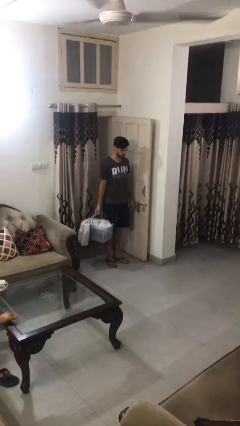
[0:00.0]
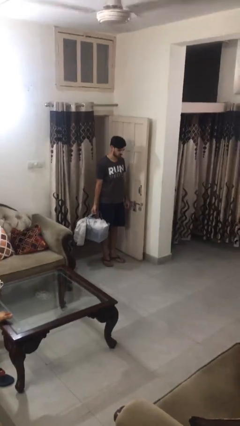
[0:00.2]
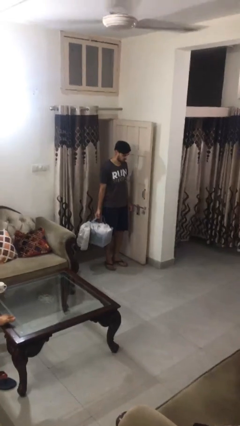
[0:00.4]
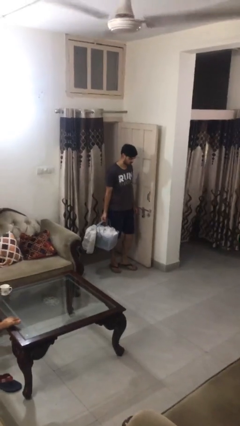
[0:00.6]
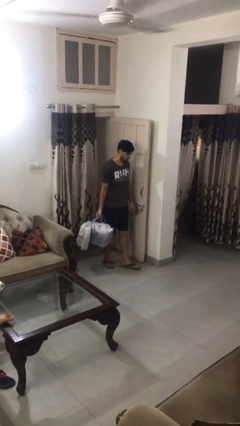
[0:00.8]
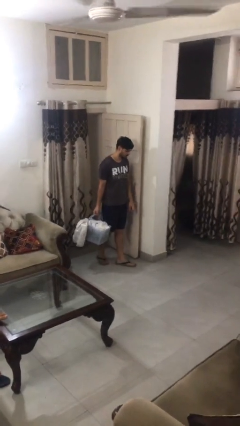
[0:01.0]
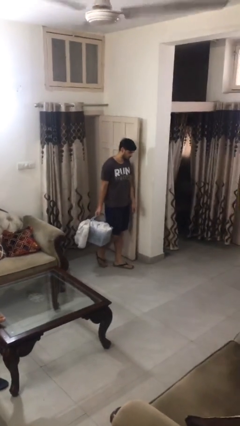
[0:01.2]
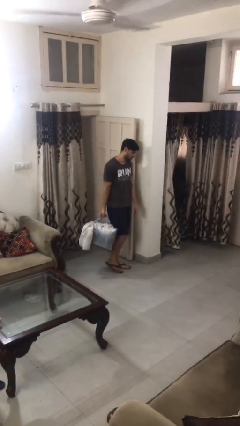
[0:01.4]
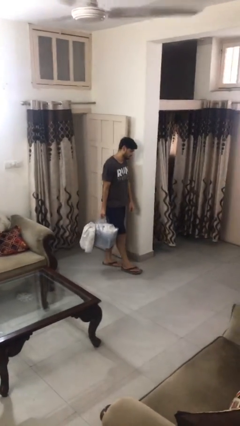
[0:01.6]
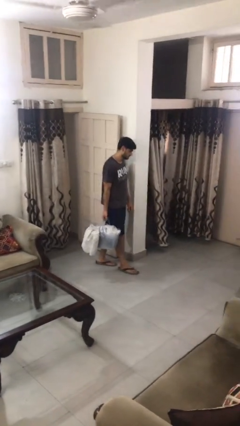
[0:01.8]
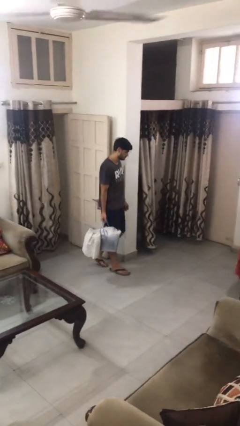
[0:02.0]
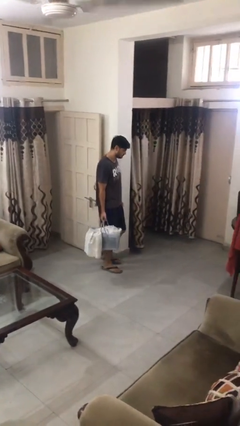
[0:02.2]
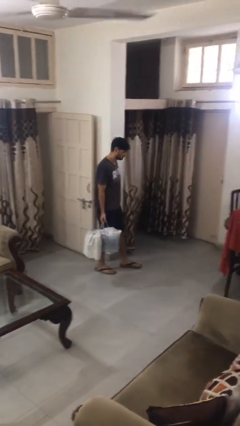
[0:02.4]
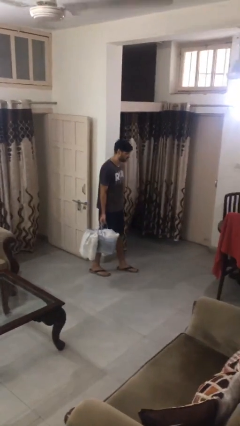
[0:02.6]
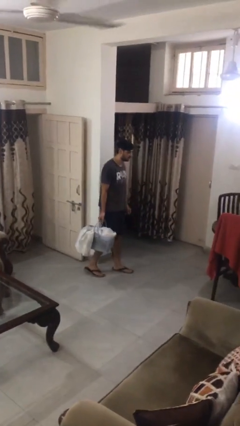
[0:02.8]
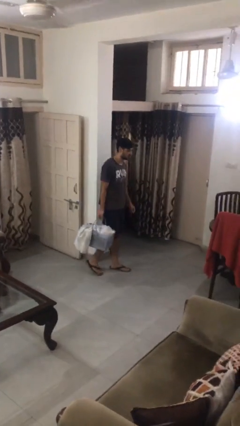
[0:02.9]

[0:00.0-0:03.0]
person carries laundry basket

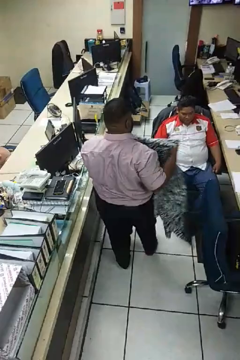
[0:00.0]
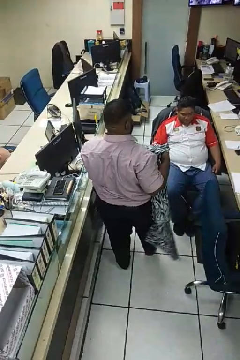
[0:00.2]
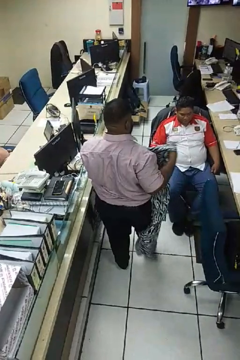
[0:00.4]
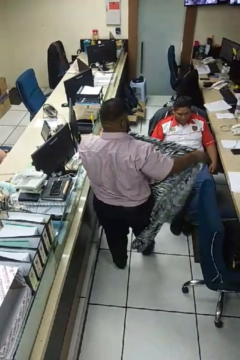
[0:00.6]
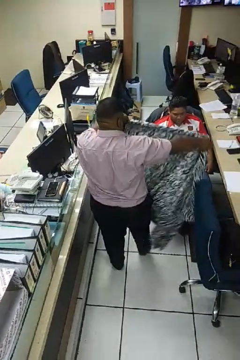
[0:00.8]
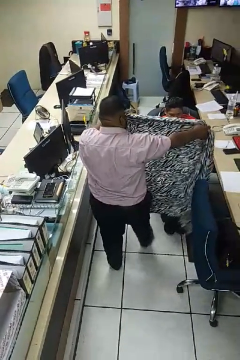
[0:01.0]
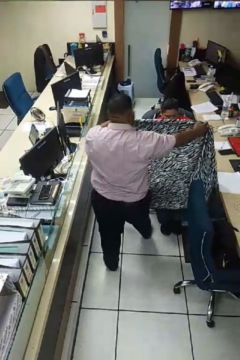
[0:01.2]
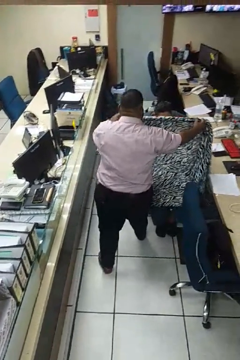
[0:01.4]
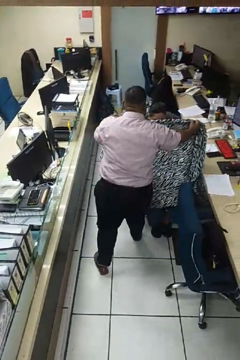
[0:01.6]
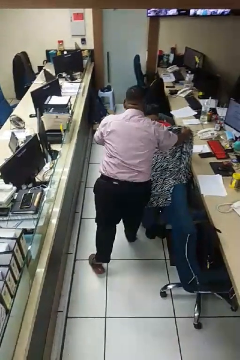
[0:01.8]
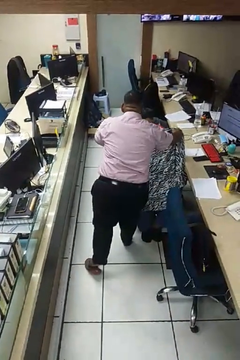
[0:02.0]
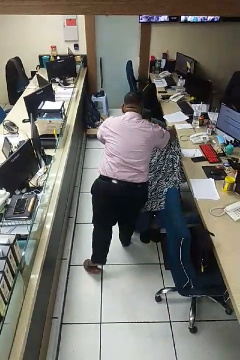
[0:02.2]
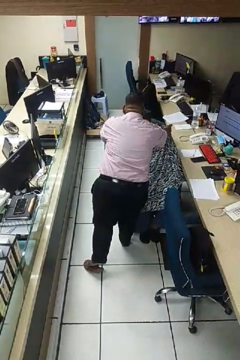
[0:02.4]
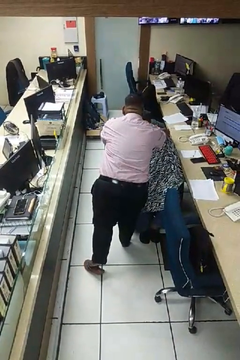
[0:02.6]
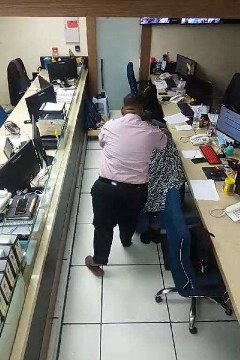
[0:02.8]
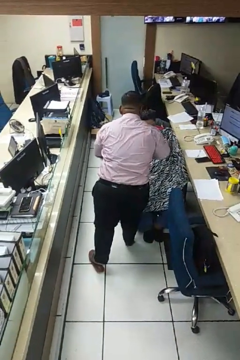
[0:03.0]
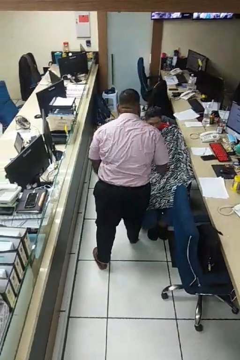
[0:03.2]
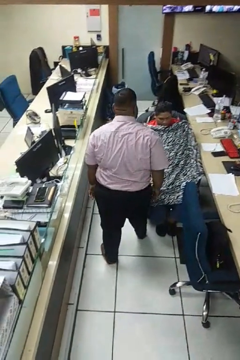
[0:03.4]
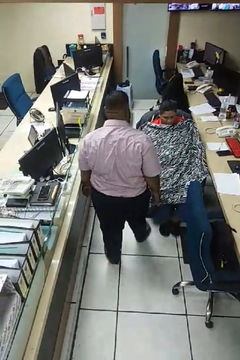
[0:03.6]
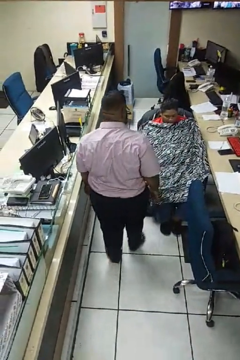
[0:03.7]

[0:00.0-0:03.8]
person covers friend with blanket

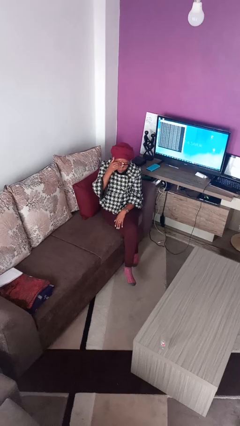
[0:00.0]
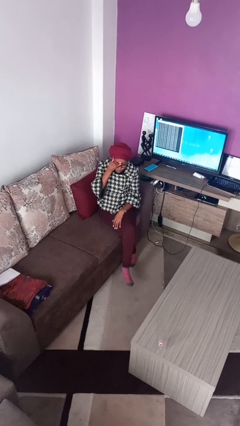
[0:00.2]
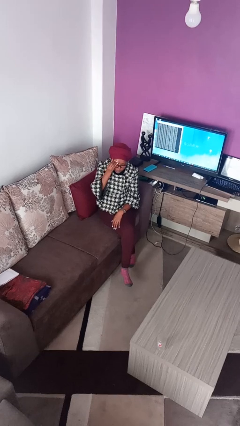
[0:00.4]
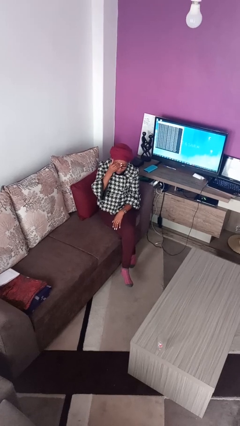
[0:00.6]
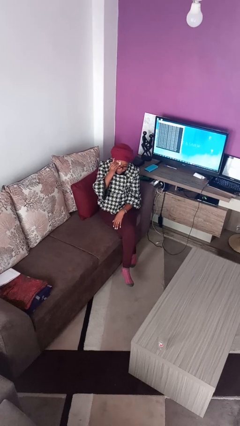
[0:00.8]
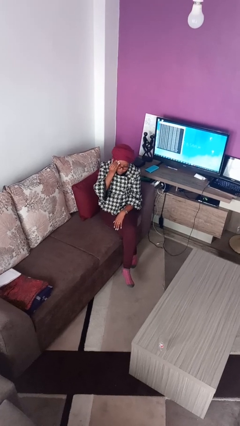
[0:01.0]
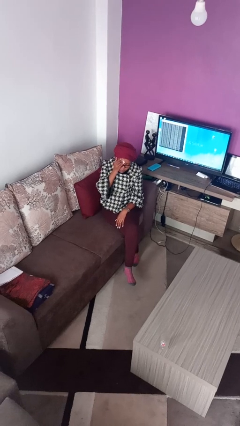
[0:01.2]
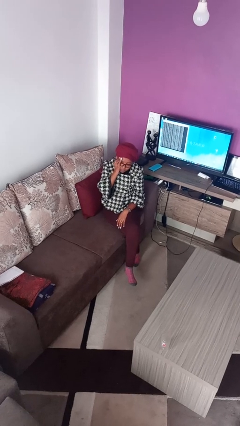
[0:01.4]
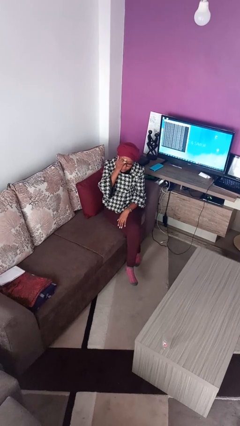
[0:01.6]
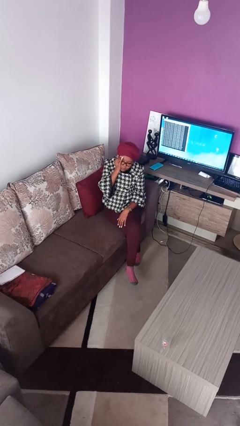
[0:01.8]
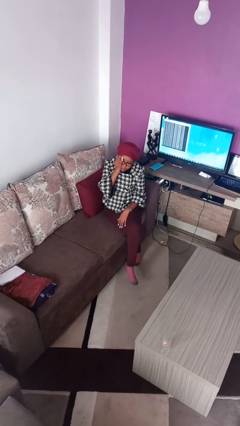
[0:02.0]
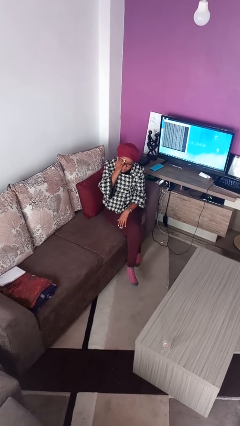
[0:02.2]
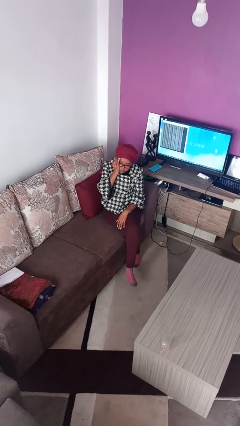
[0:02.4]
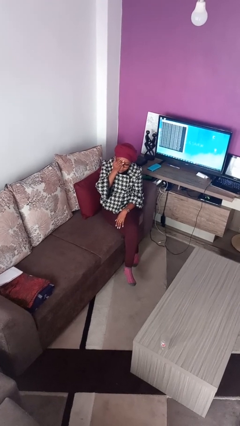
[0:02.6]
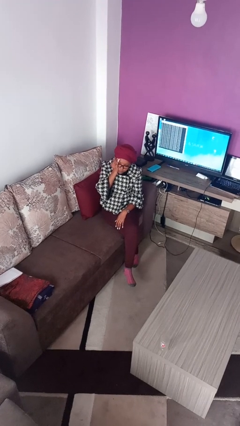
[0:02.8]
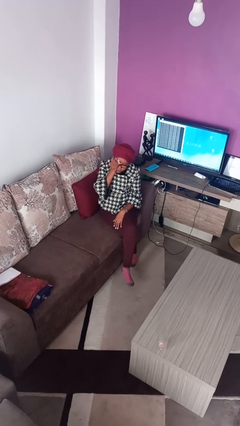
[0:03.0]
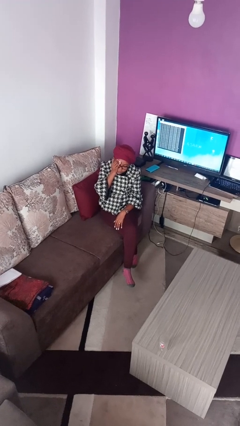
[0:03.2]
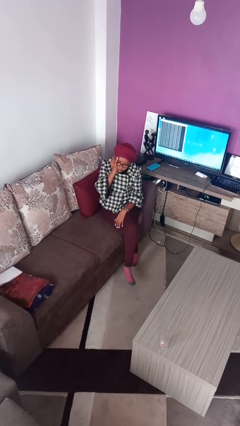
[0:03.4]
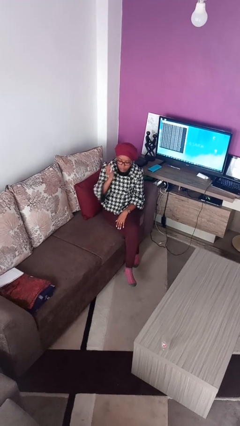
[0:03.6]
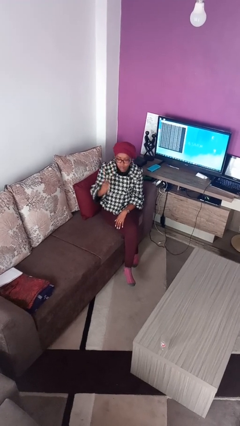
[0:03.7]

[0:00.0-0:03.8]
person scratches face

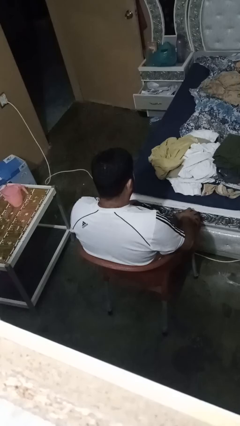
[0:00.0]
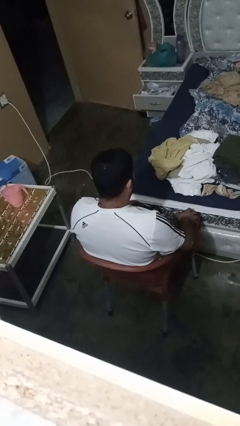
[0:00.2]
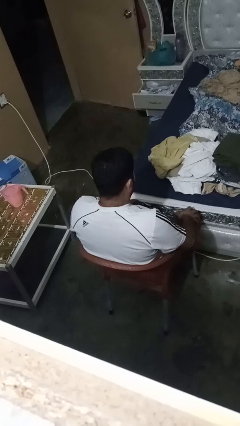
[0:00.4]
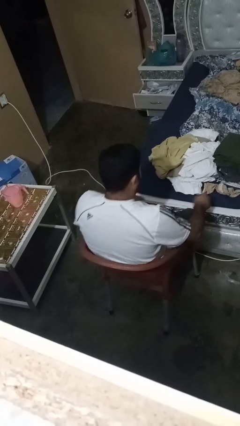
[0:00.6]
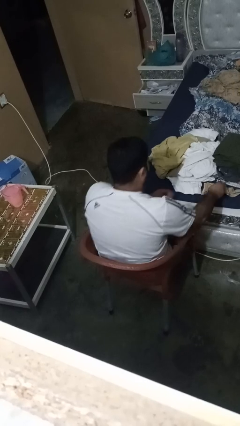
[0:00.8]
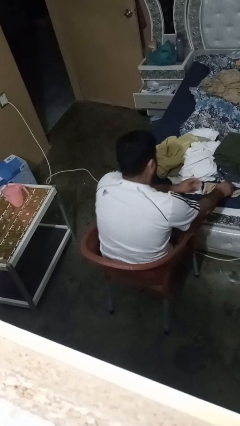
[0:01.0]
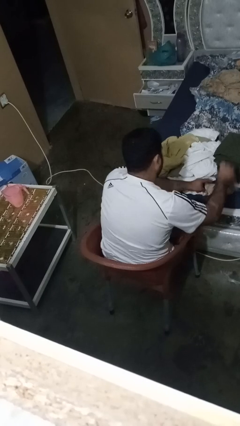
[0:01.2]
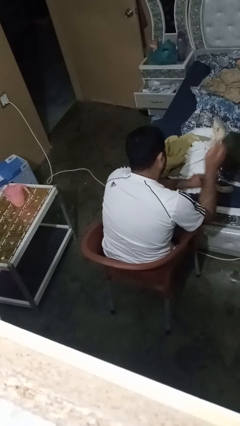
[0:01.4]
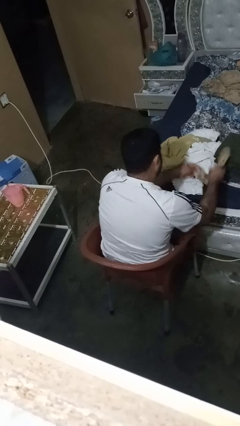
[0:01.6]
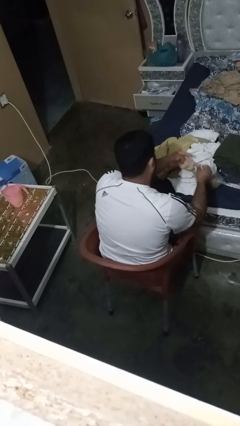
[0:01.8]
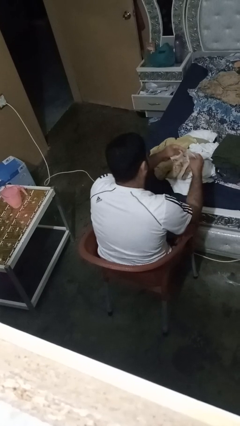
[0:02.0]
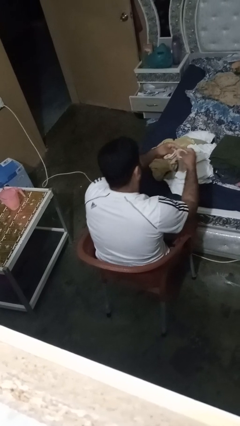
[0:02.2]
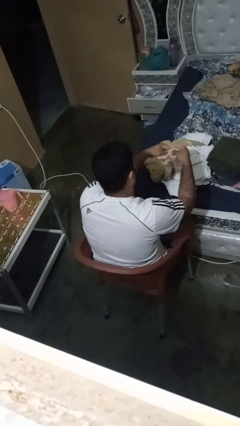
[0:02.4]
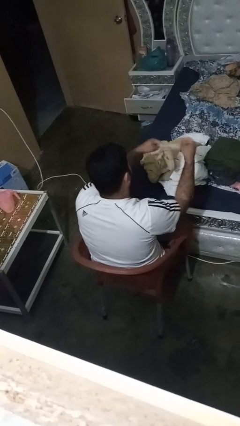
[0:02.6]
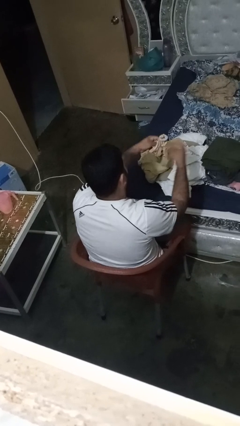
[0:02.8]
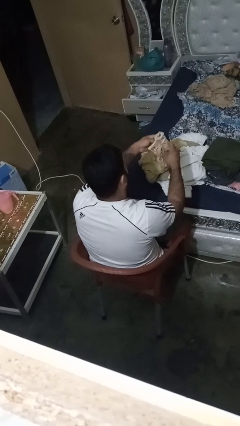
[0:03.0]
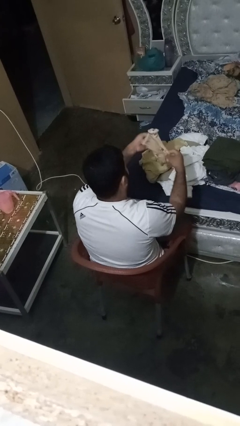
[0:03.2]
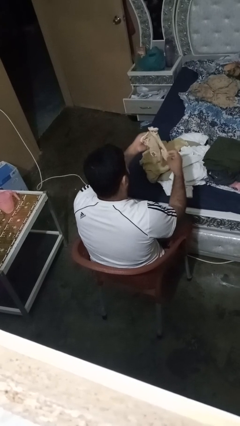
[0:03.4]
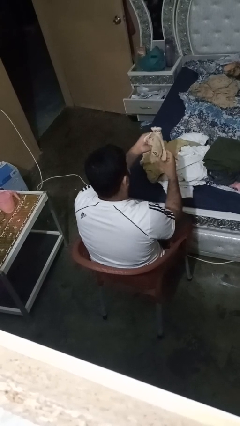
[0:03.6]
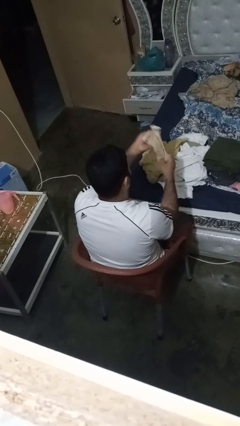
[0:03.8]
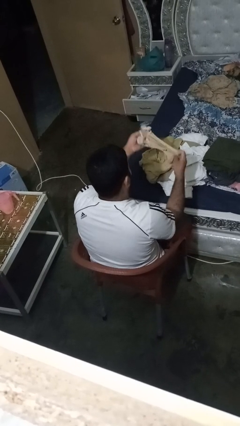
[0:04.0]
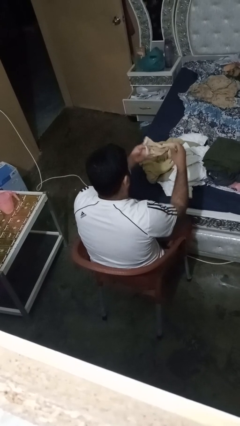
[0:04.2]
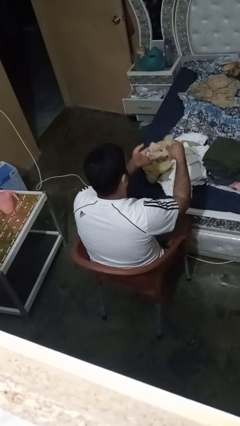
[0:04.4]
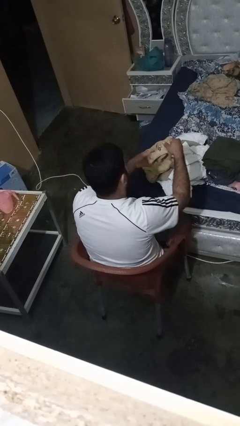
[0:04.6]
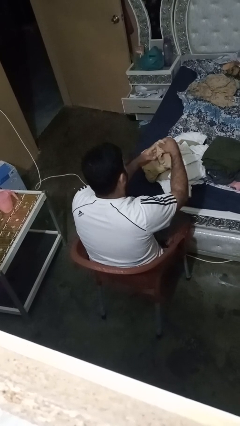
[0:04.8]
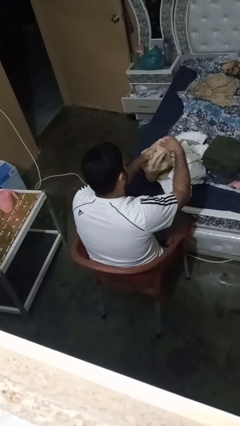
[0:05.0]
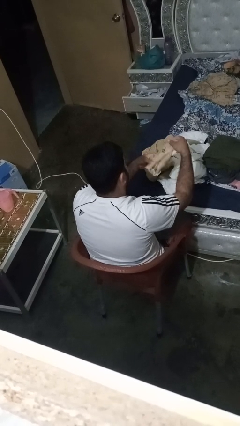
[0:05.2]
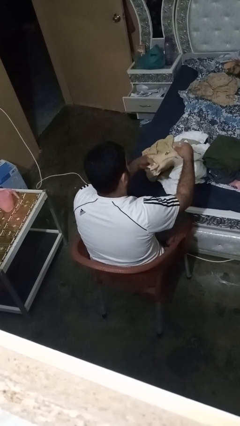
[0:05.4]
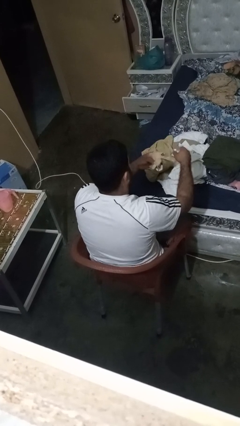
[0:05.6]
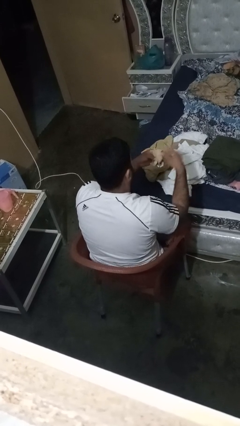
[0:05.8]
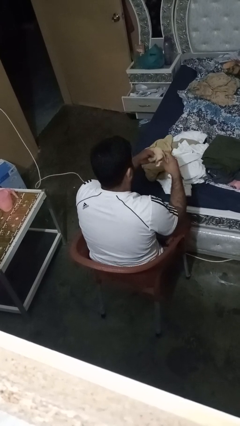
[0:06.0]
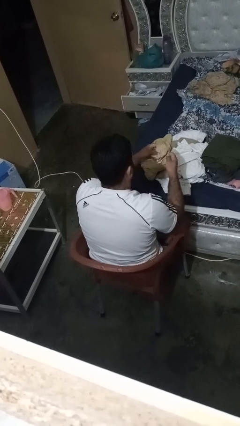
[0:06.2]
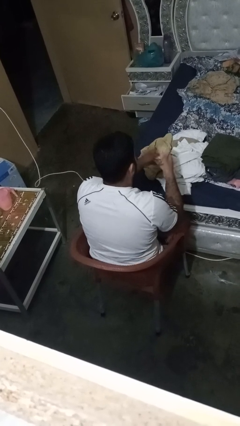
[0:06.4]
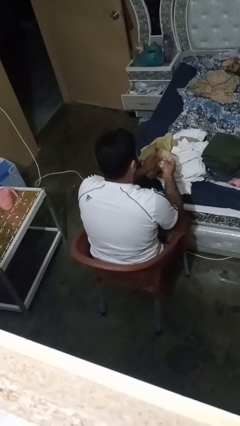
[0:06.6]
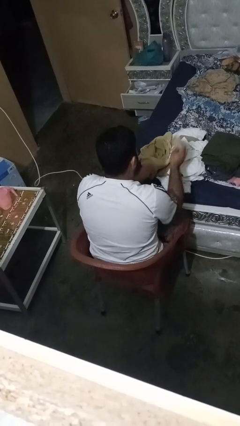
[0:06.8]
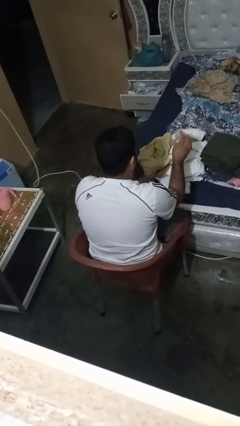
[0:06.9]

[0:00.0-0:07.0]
person folds socks

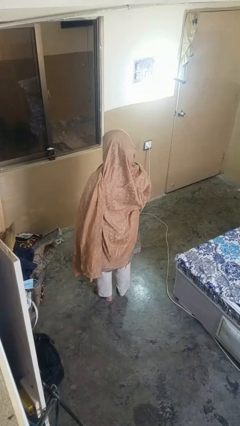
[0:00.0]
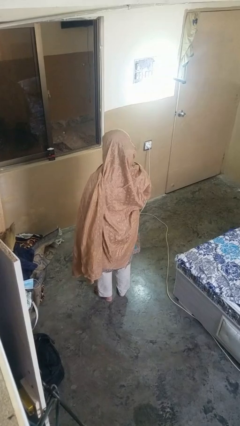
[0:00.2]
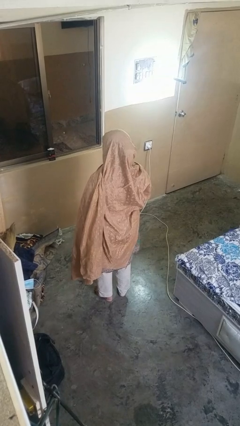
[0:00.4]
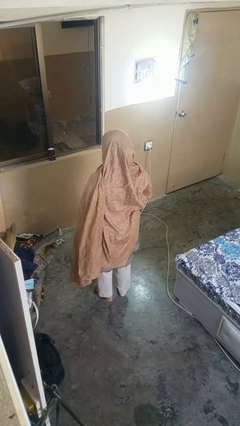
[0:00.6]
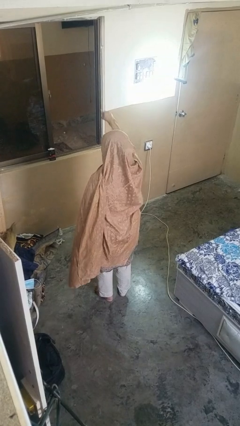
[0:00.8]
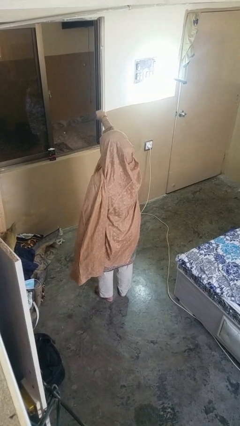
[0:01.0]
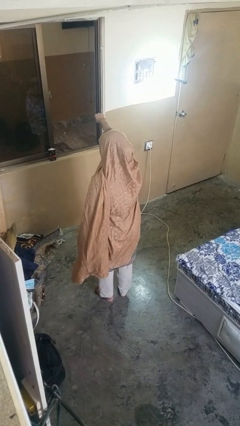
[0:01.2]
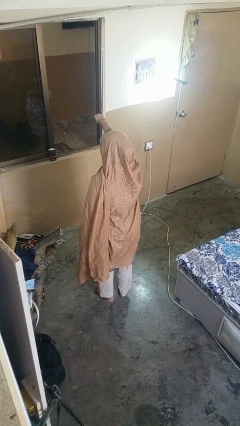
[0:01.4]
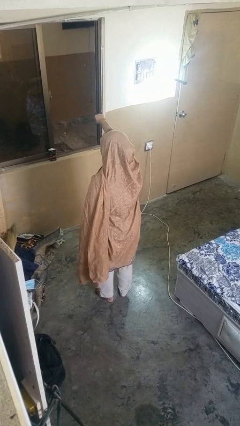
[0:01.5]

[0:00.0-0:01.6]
person punches
